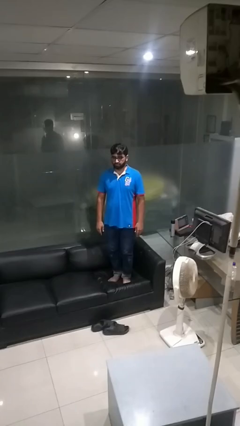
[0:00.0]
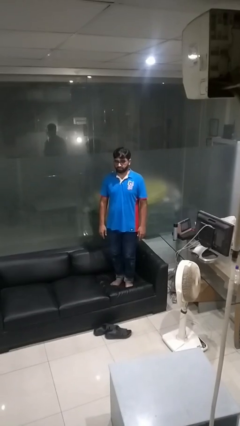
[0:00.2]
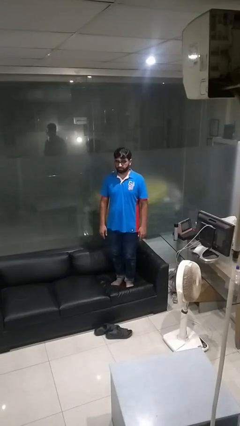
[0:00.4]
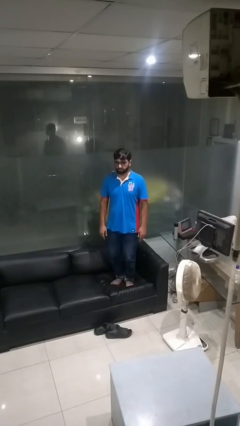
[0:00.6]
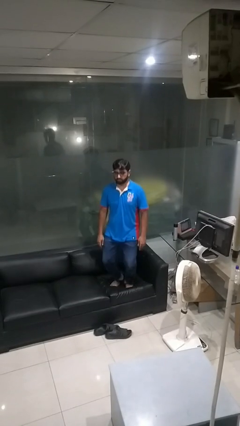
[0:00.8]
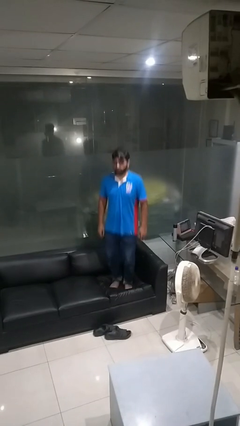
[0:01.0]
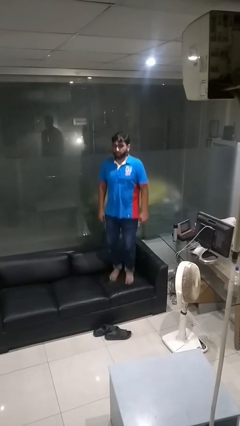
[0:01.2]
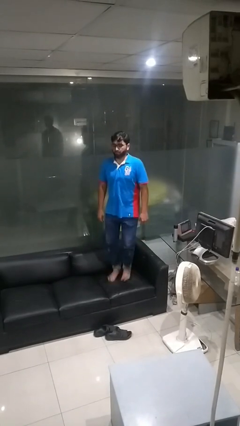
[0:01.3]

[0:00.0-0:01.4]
person jumps on couch

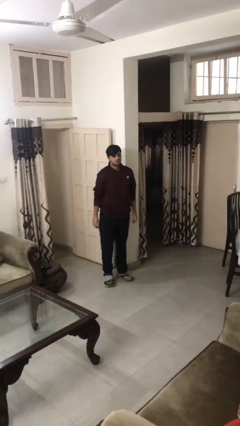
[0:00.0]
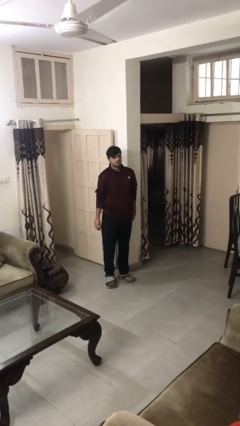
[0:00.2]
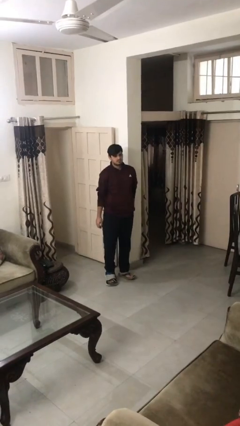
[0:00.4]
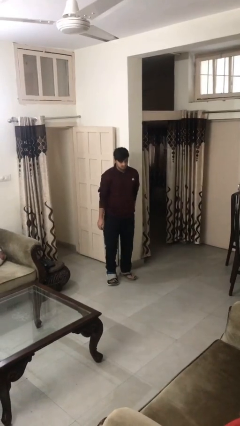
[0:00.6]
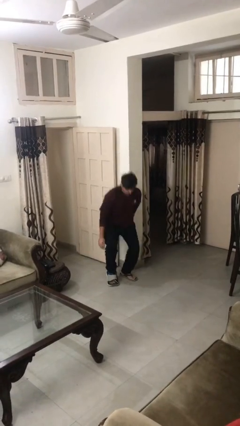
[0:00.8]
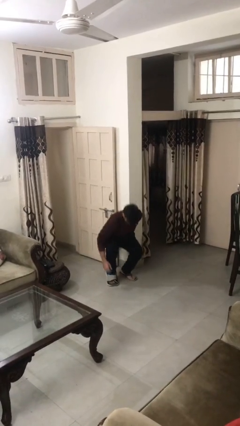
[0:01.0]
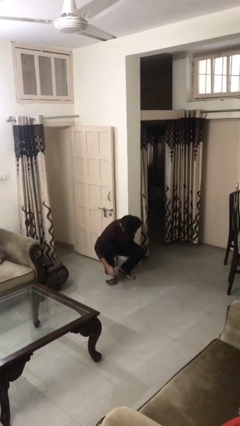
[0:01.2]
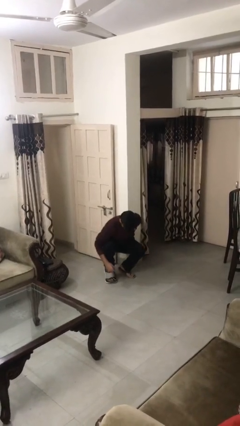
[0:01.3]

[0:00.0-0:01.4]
person sits down

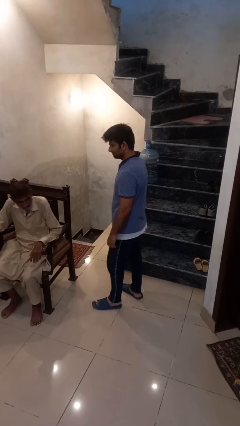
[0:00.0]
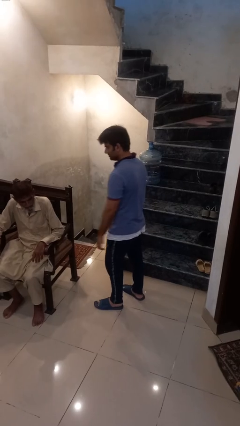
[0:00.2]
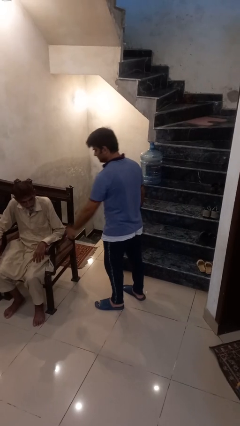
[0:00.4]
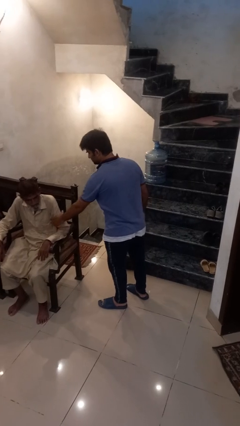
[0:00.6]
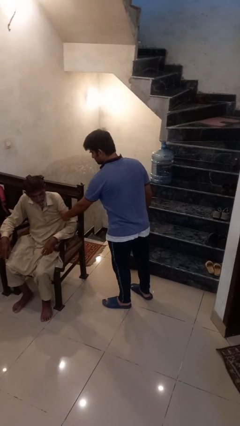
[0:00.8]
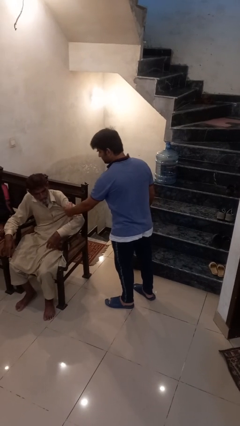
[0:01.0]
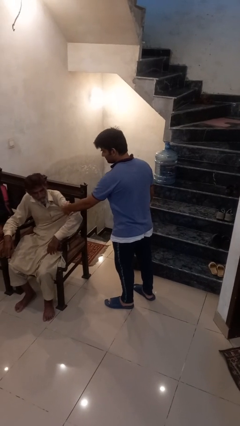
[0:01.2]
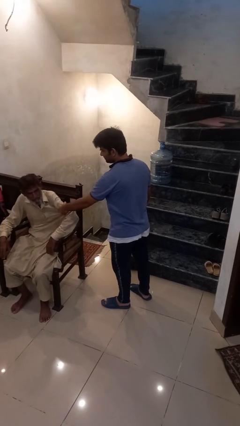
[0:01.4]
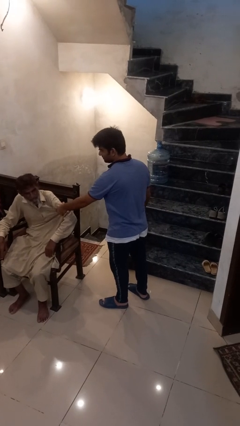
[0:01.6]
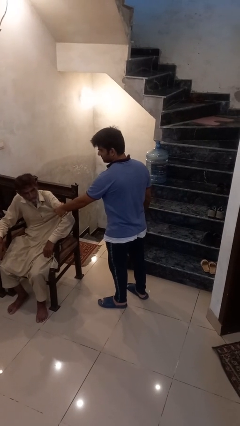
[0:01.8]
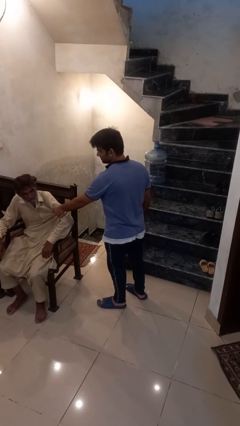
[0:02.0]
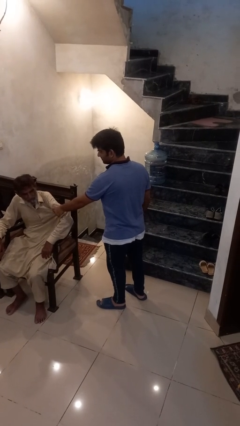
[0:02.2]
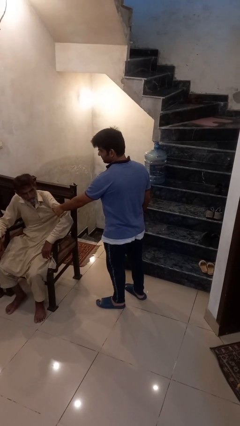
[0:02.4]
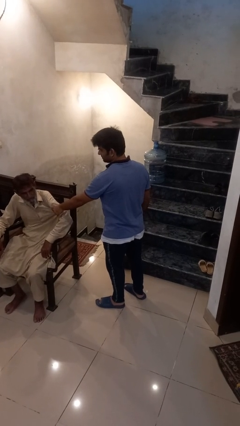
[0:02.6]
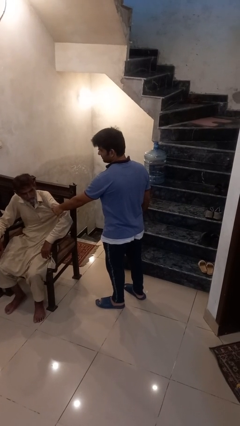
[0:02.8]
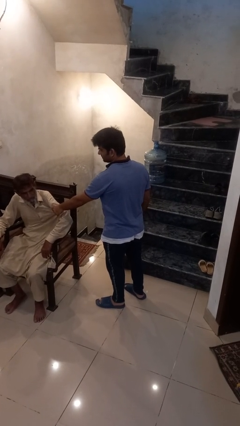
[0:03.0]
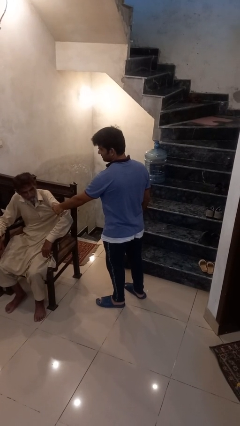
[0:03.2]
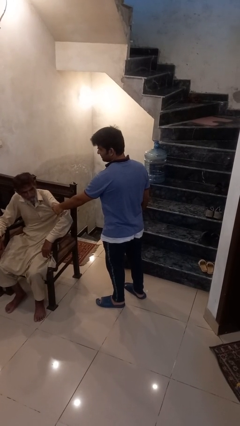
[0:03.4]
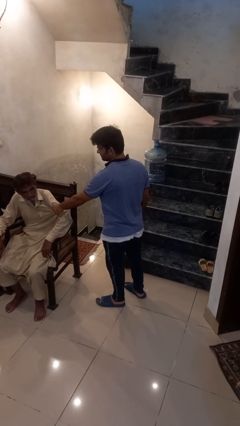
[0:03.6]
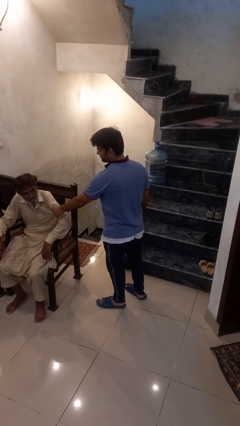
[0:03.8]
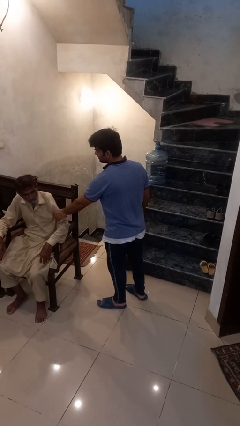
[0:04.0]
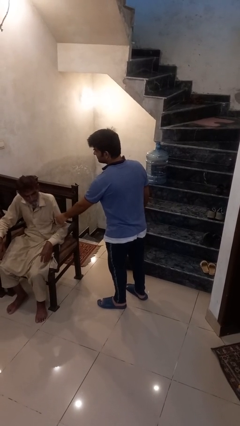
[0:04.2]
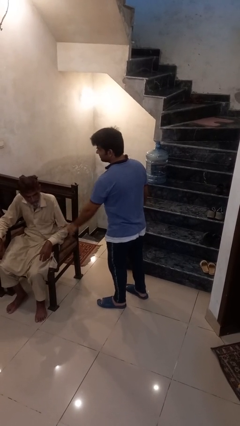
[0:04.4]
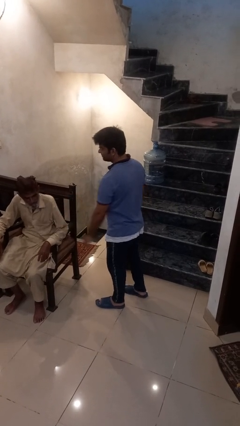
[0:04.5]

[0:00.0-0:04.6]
person grabs person by bicep

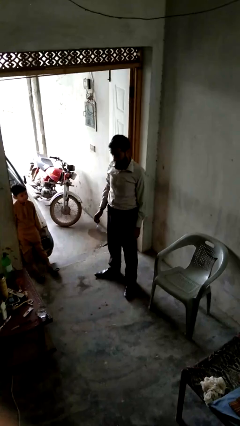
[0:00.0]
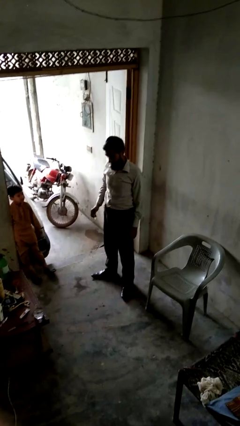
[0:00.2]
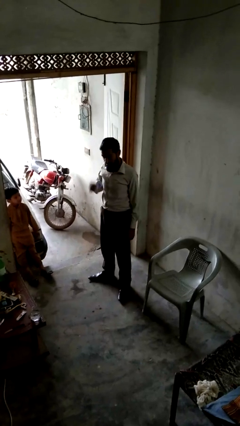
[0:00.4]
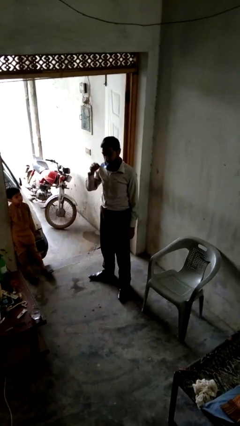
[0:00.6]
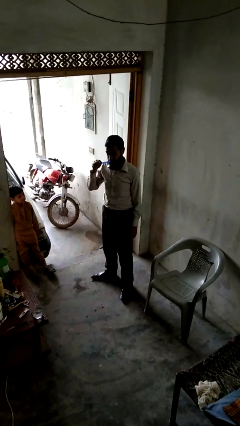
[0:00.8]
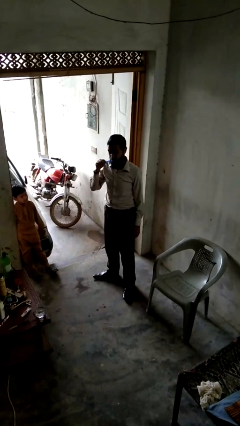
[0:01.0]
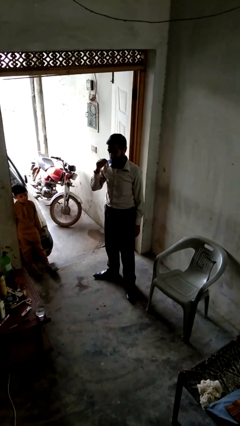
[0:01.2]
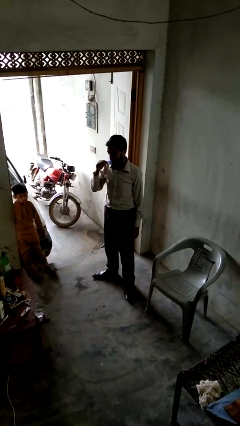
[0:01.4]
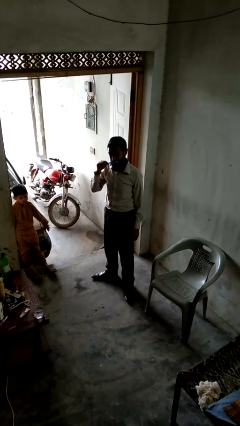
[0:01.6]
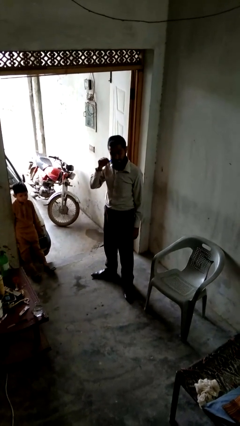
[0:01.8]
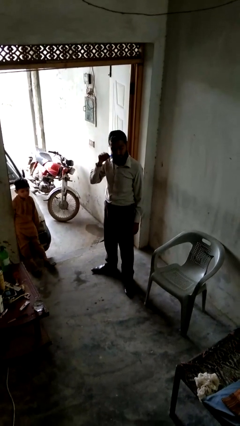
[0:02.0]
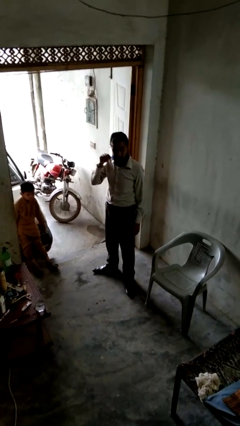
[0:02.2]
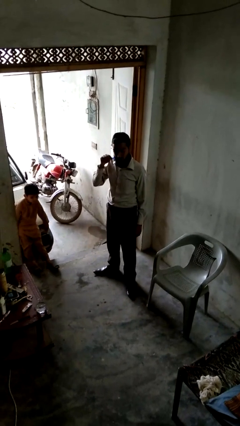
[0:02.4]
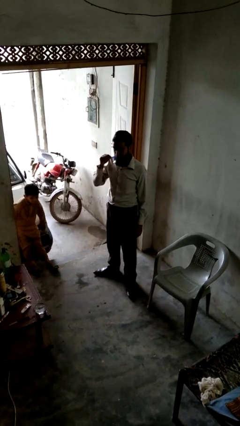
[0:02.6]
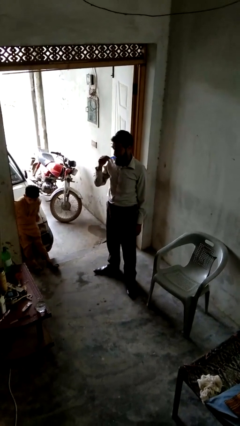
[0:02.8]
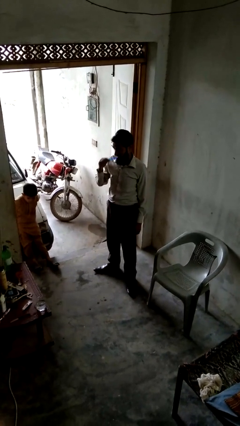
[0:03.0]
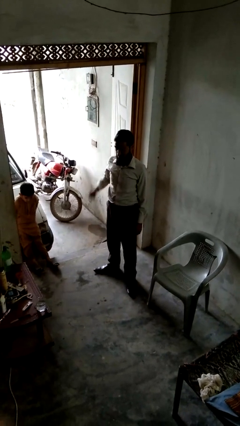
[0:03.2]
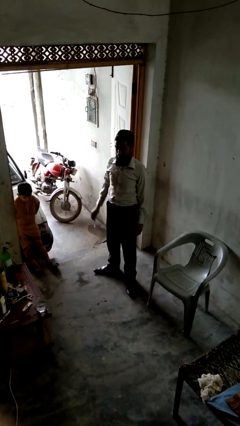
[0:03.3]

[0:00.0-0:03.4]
person brushes teeth

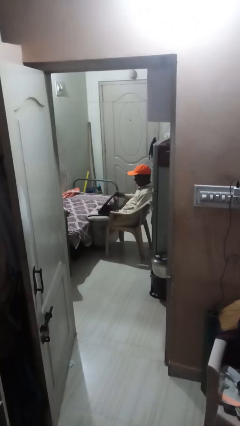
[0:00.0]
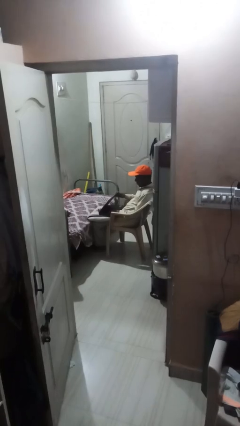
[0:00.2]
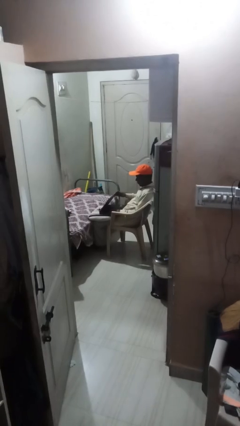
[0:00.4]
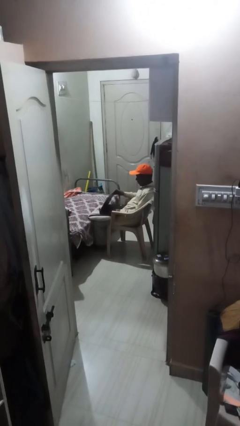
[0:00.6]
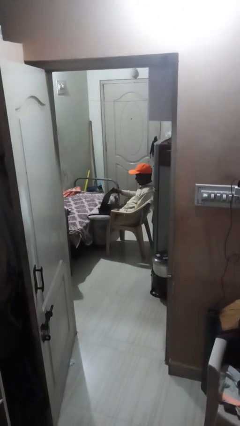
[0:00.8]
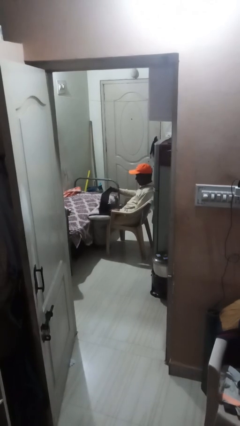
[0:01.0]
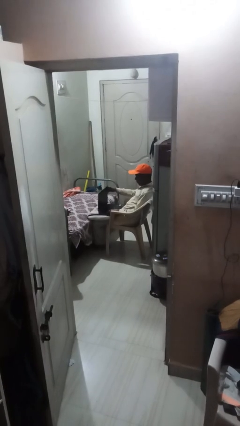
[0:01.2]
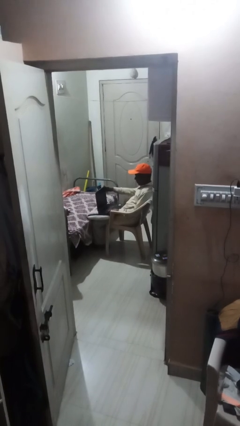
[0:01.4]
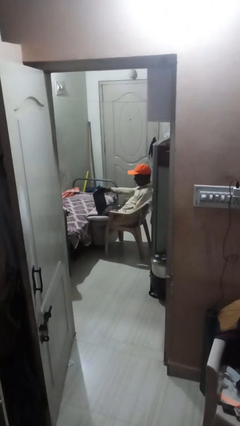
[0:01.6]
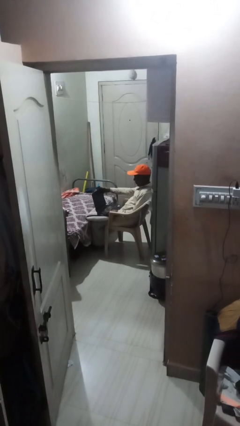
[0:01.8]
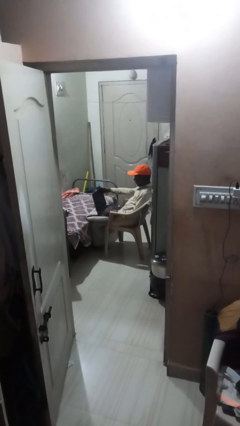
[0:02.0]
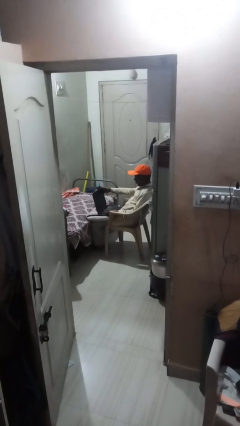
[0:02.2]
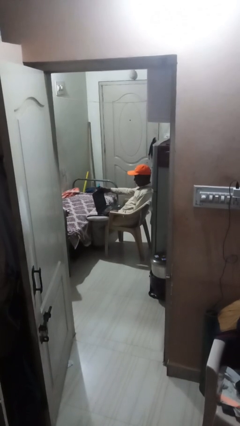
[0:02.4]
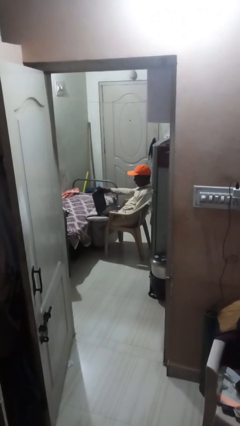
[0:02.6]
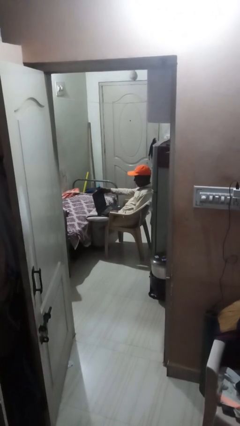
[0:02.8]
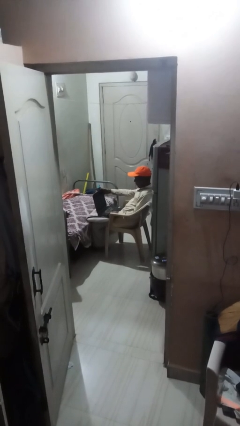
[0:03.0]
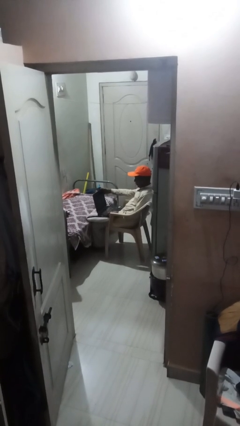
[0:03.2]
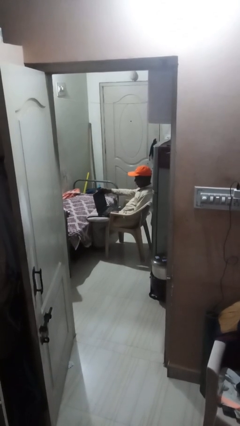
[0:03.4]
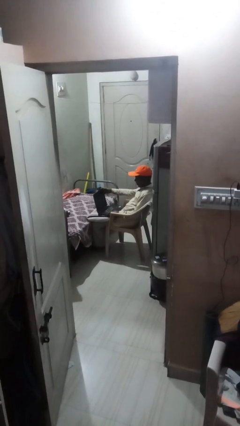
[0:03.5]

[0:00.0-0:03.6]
person interacts with laptop

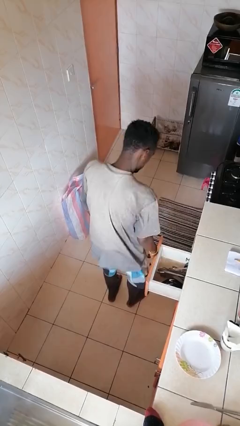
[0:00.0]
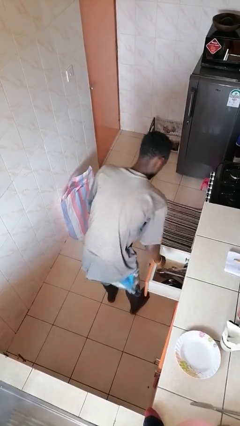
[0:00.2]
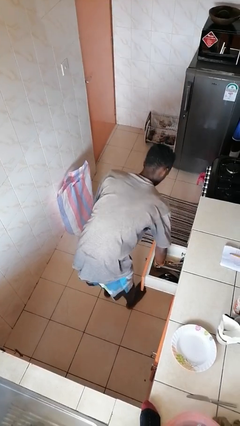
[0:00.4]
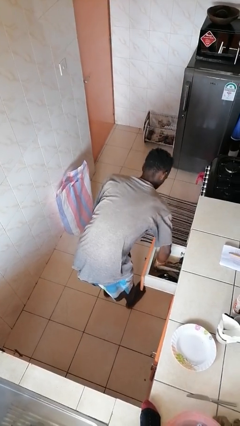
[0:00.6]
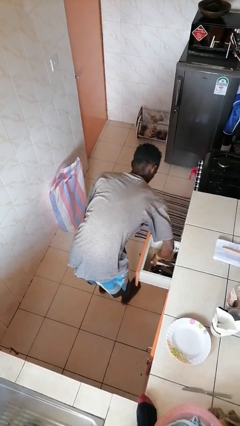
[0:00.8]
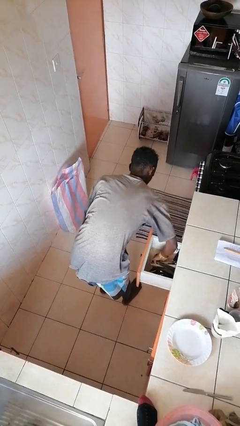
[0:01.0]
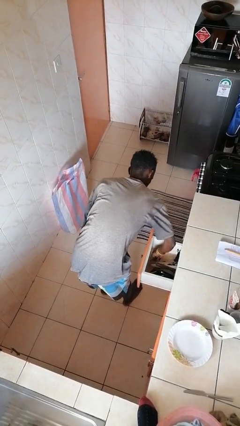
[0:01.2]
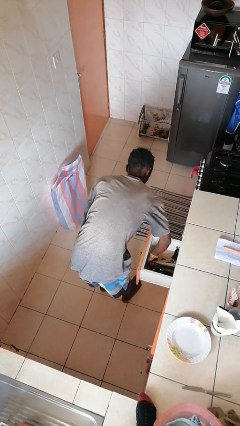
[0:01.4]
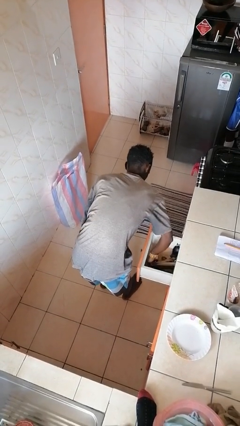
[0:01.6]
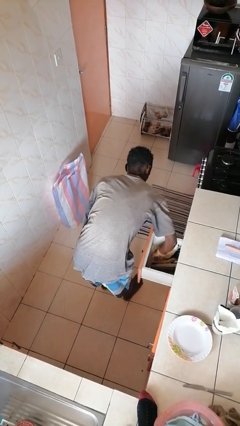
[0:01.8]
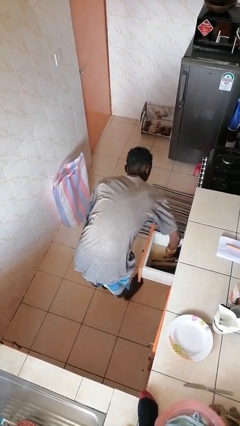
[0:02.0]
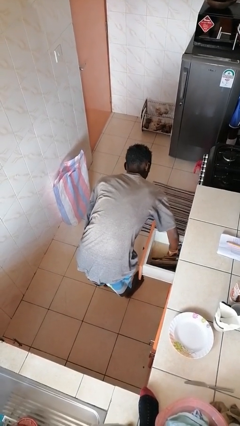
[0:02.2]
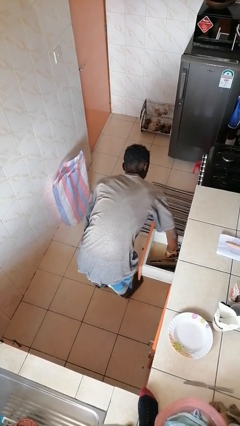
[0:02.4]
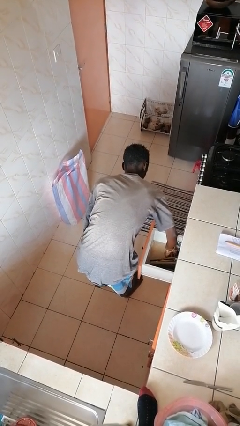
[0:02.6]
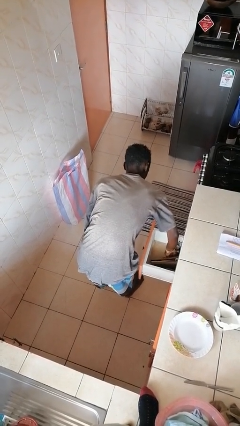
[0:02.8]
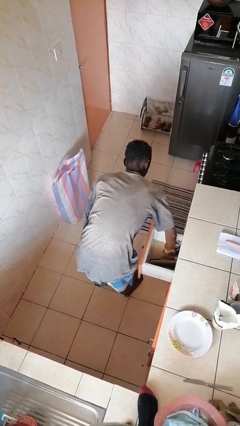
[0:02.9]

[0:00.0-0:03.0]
person searches in kitchen drawer
